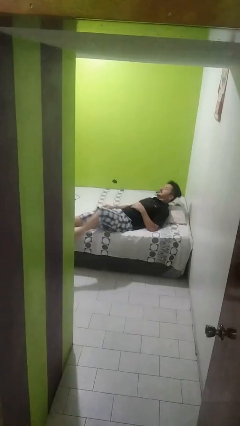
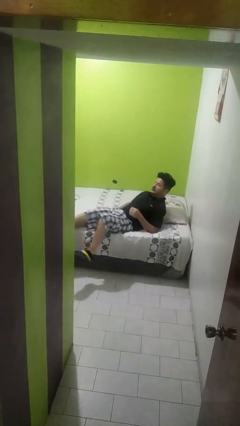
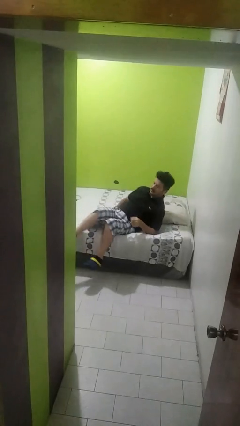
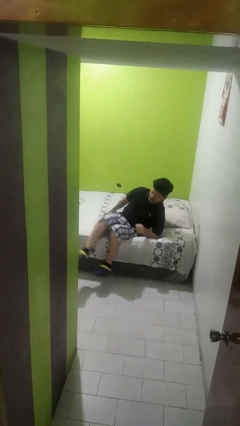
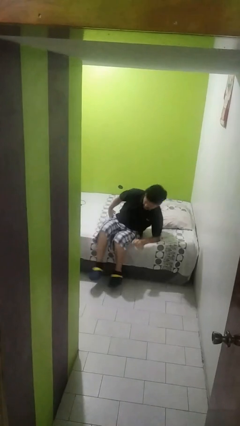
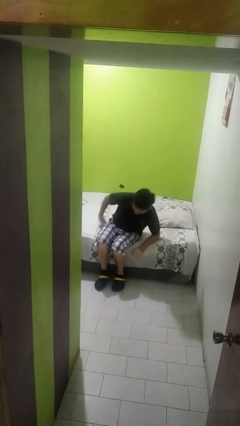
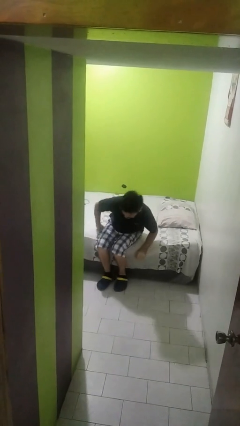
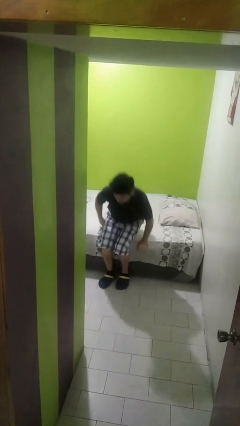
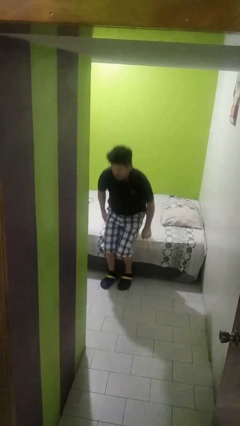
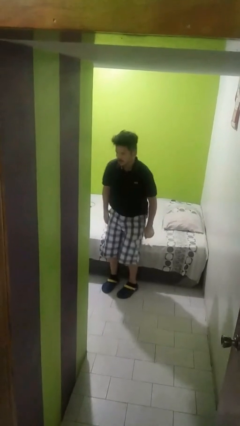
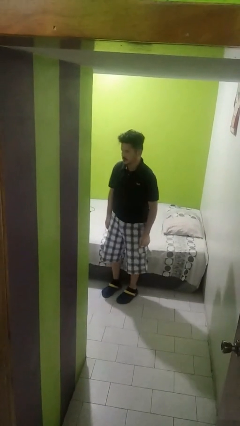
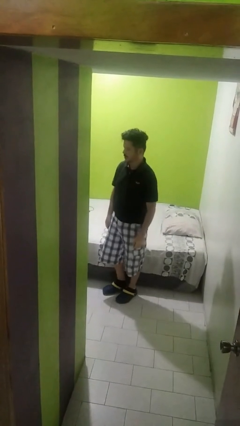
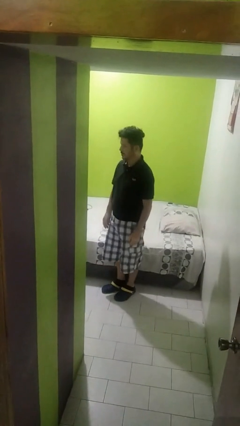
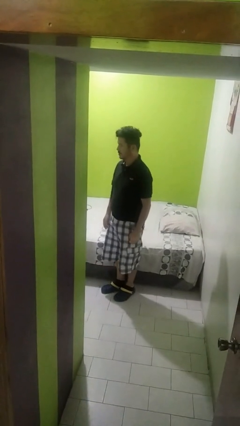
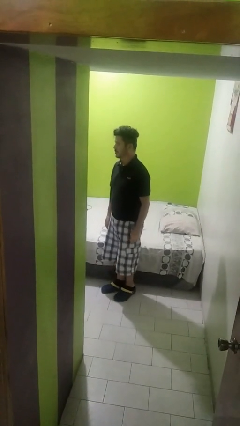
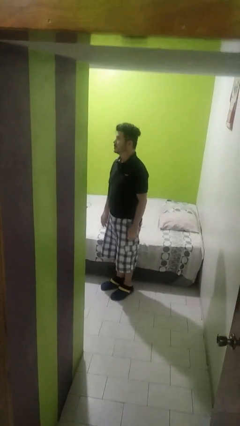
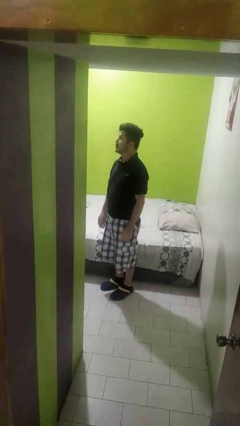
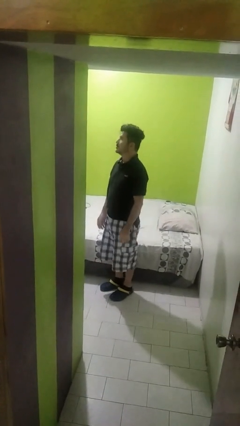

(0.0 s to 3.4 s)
person stands up

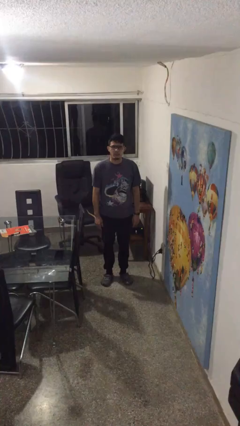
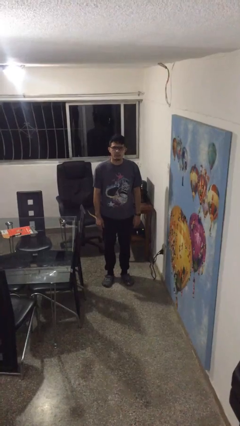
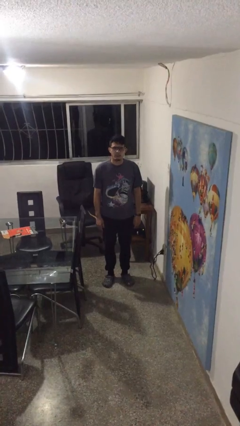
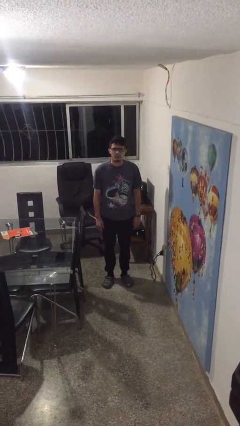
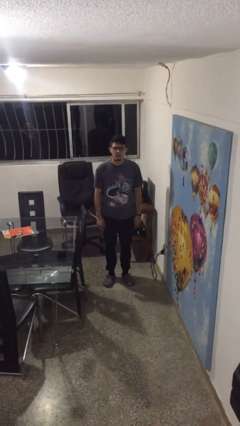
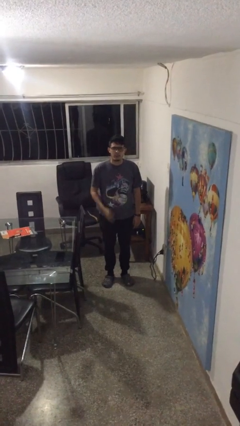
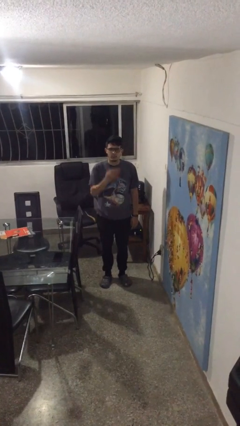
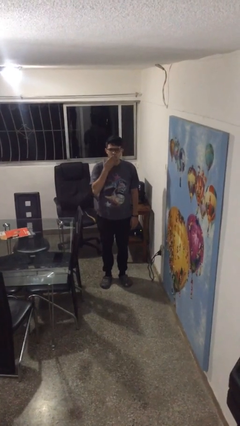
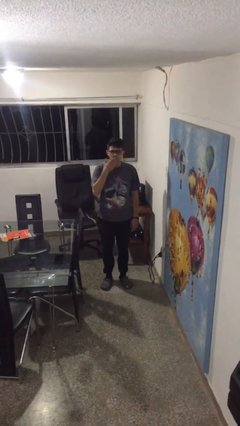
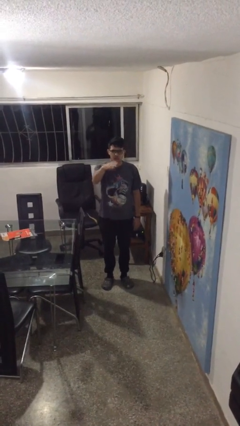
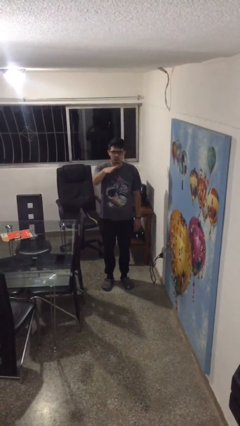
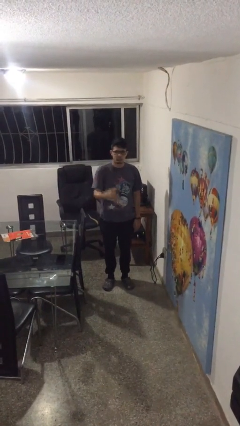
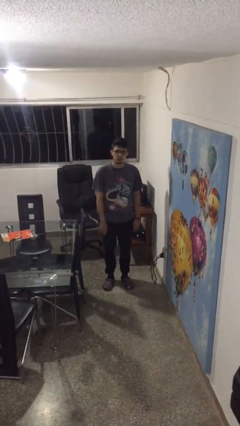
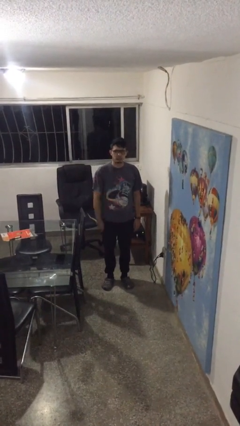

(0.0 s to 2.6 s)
person gestures blow kiss

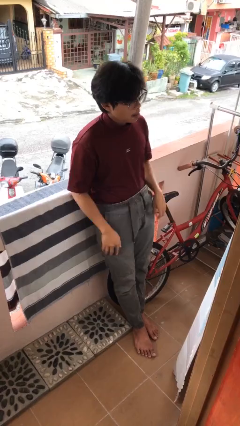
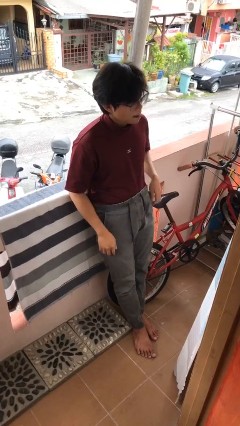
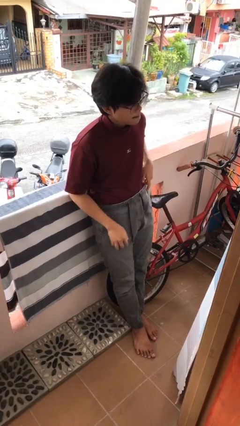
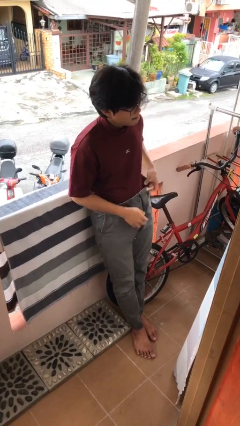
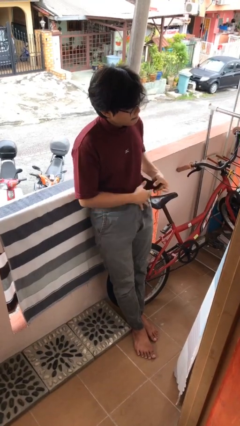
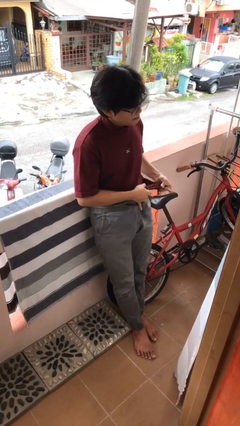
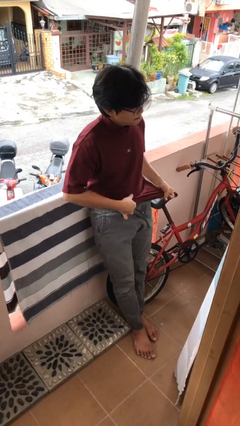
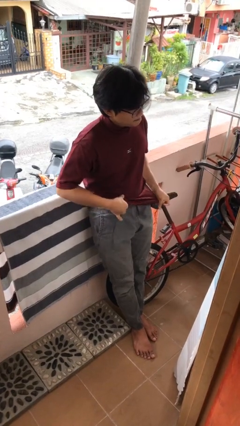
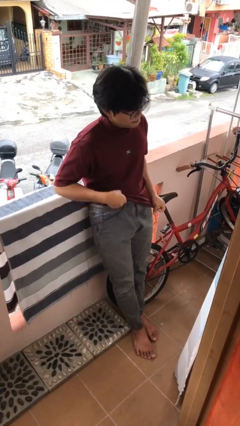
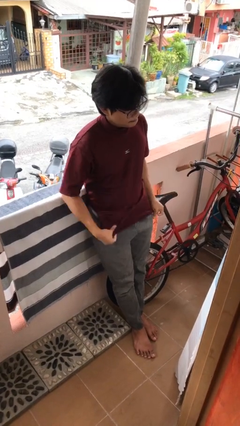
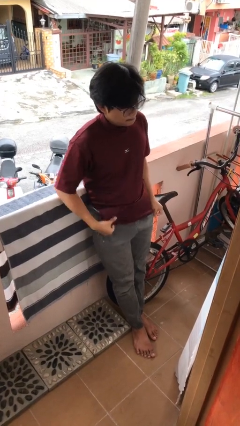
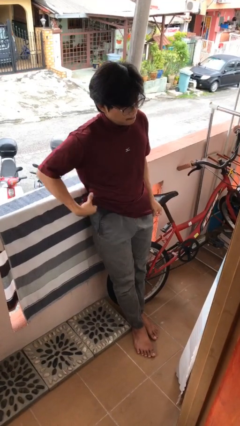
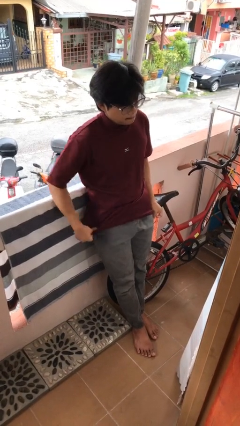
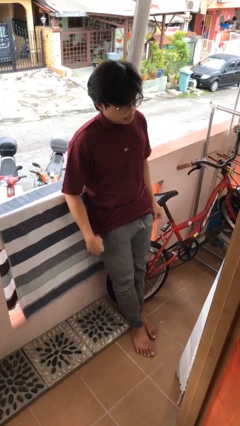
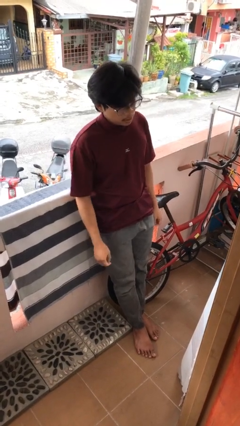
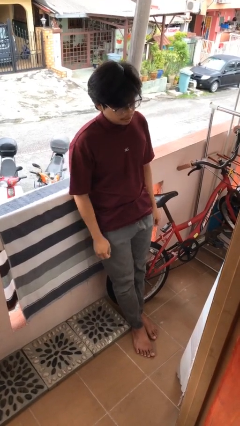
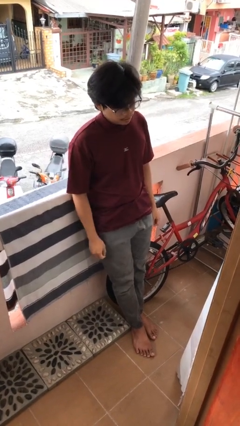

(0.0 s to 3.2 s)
person untucks shirt

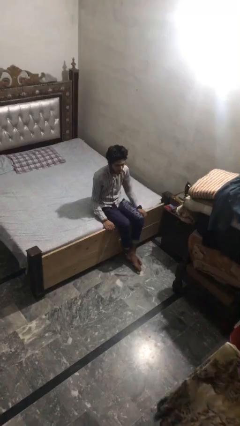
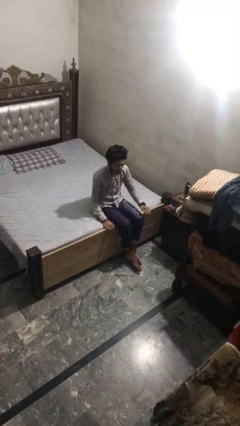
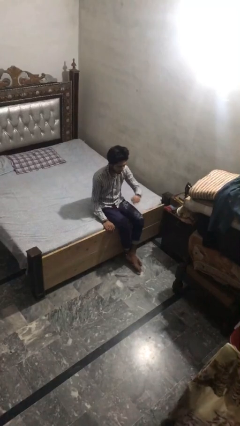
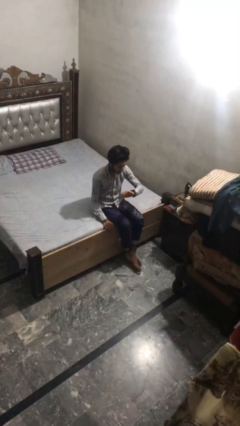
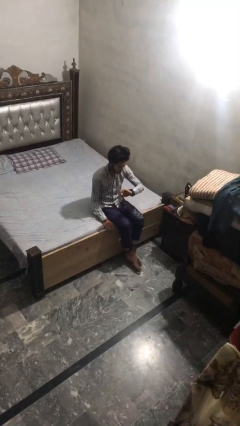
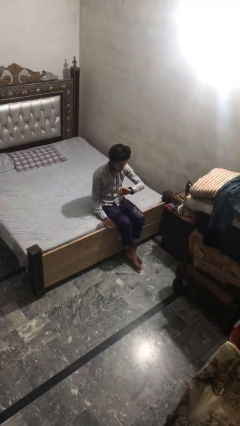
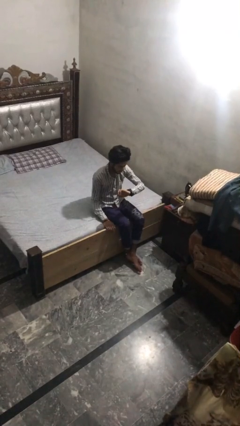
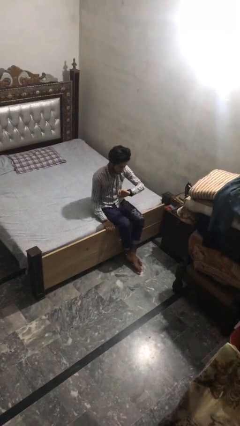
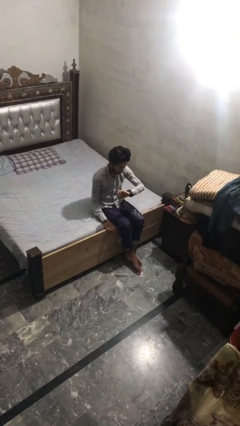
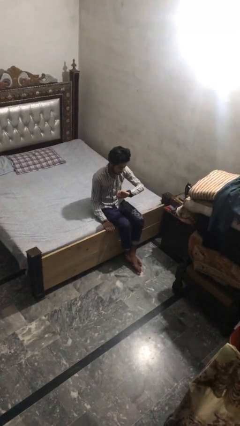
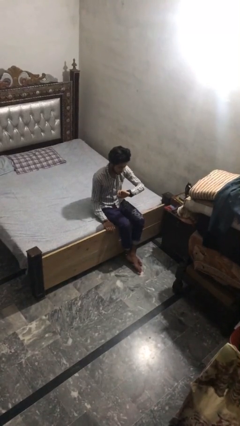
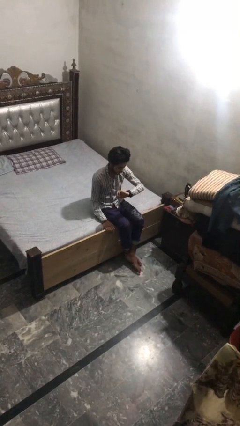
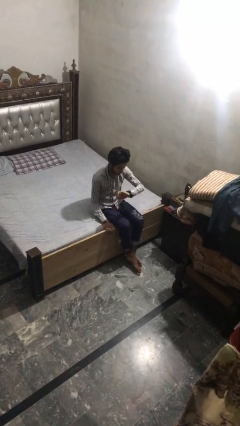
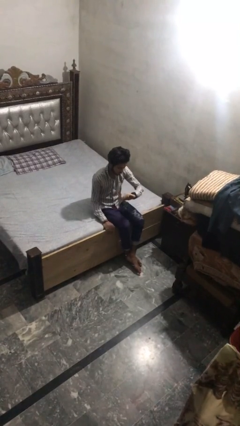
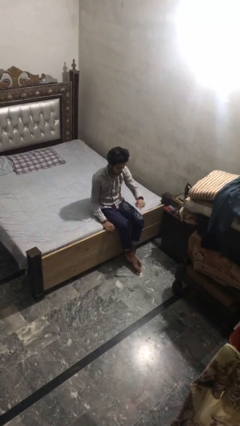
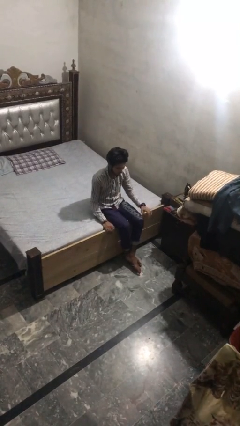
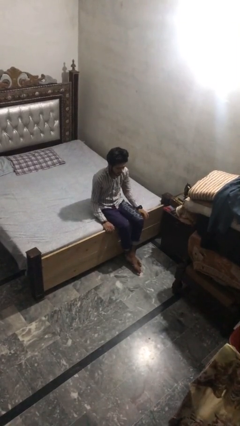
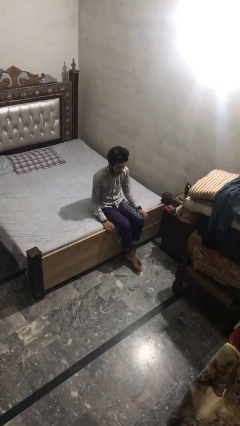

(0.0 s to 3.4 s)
person looks at wristwatch

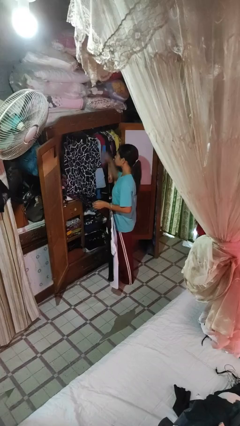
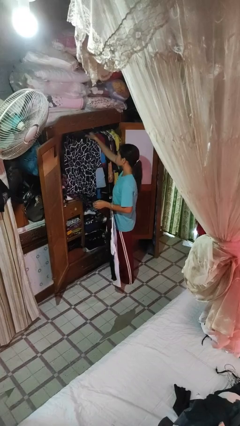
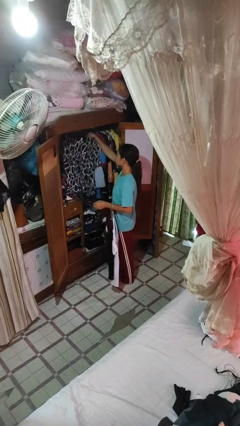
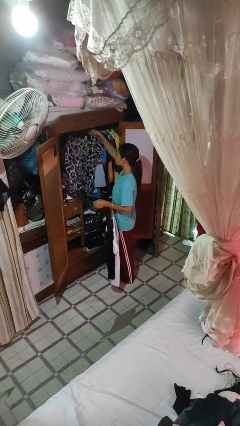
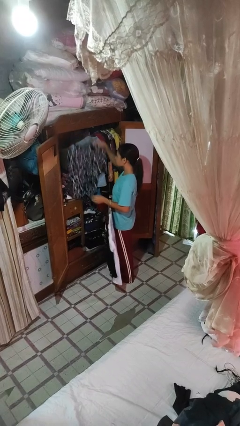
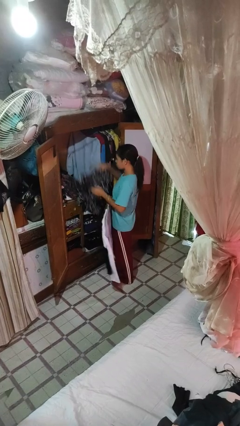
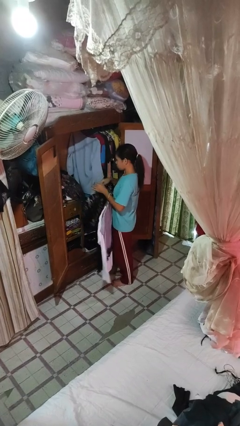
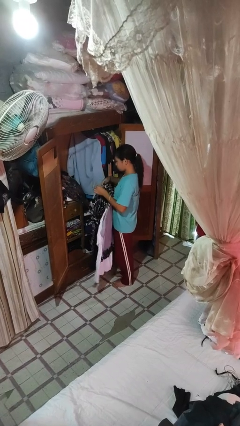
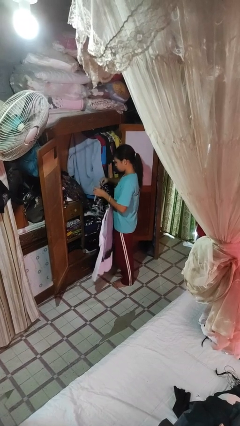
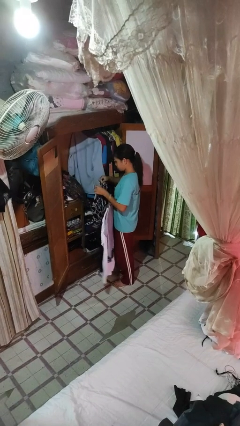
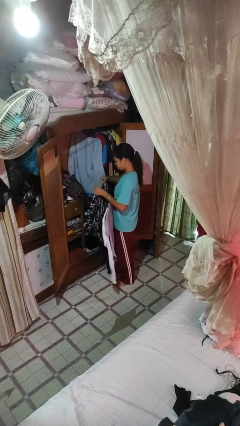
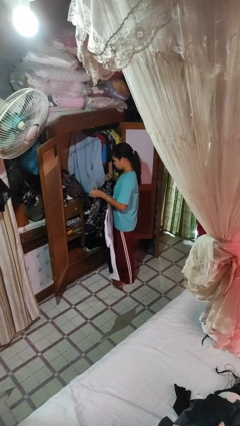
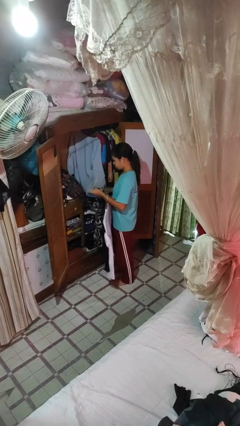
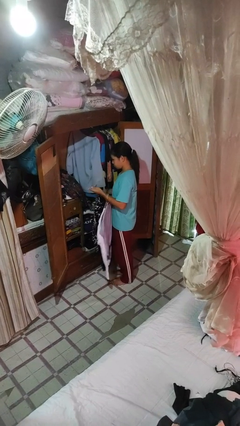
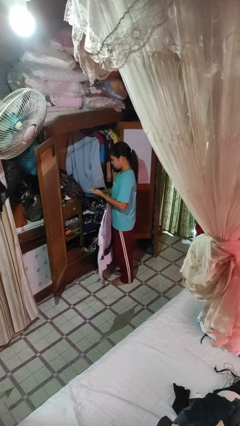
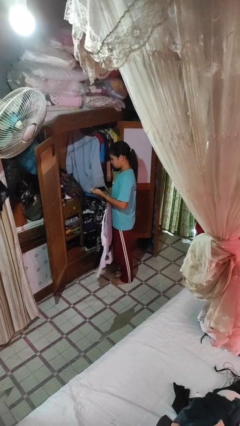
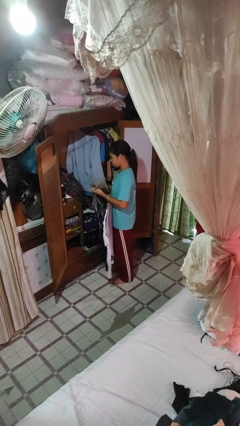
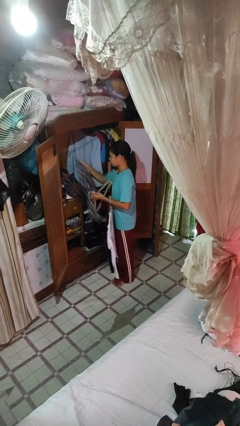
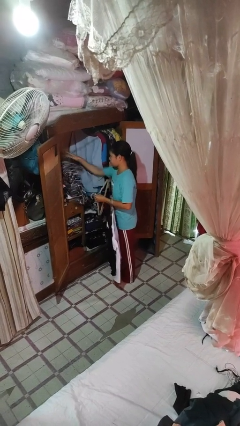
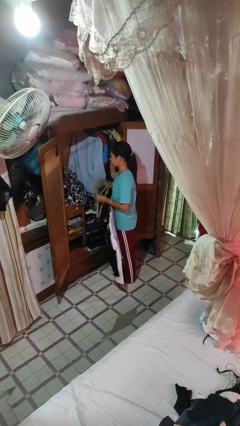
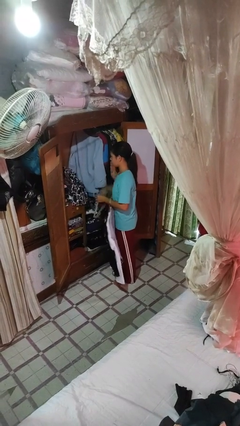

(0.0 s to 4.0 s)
person takes clothes from closet

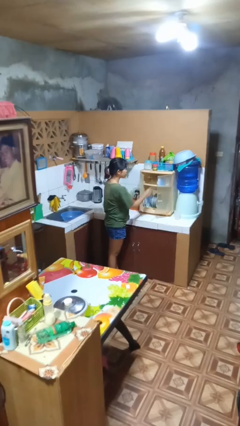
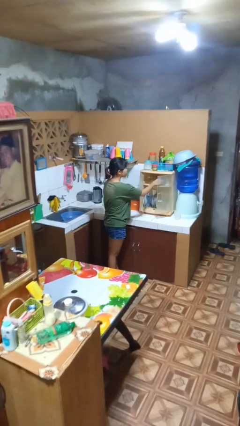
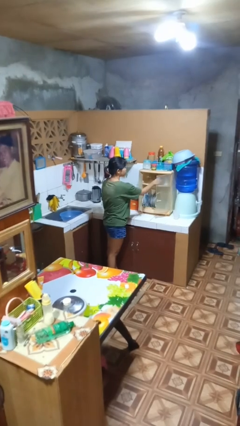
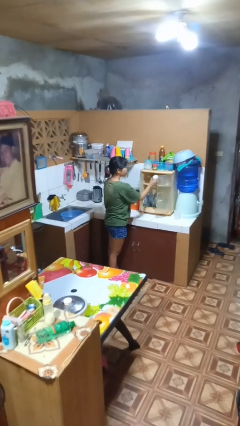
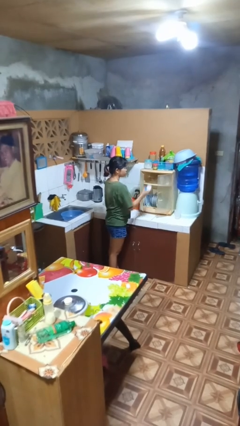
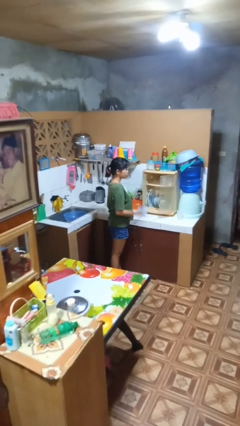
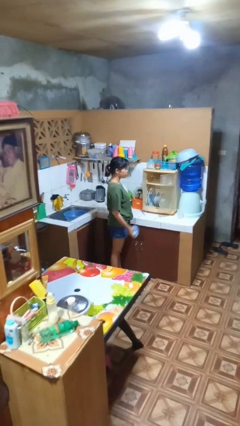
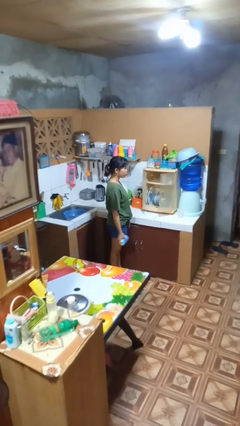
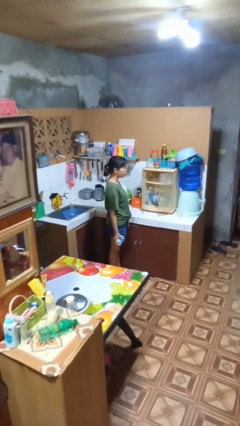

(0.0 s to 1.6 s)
person takes object from cabinet
